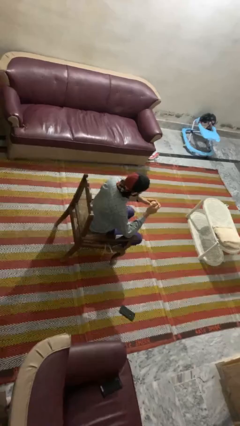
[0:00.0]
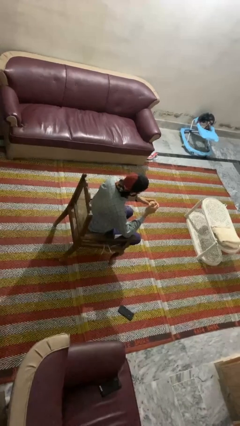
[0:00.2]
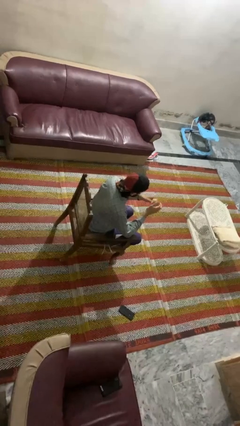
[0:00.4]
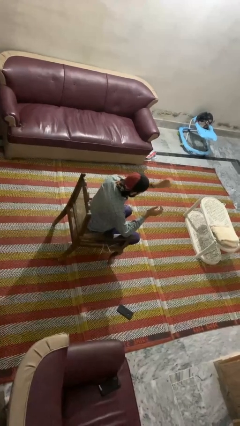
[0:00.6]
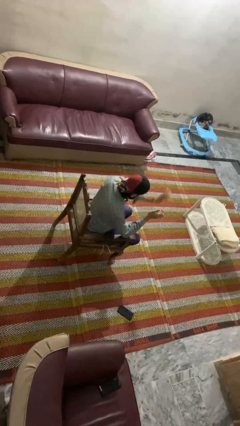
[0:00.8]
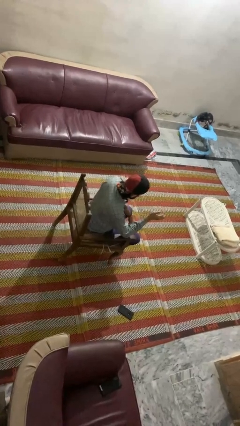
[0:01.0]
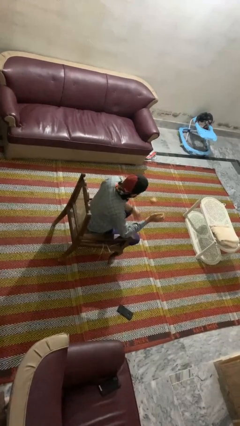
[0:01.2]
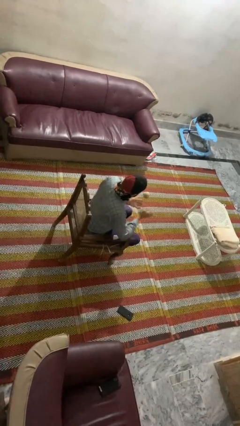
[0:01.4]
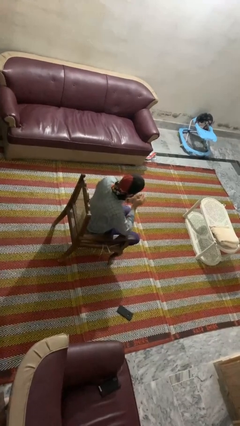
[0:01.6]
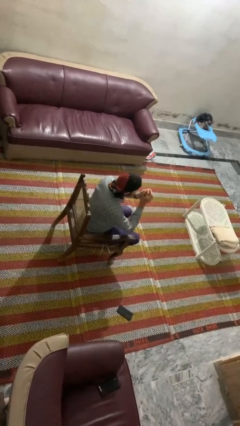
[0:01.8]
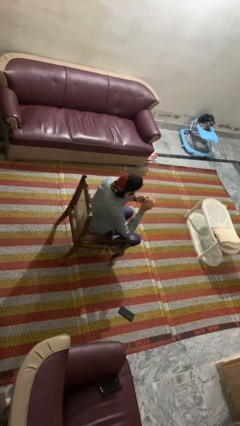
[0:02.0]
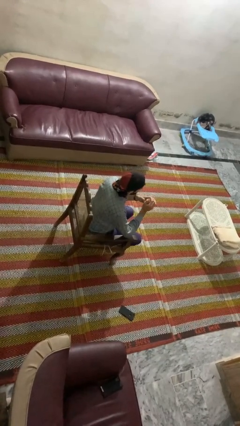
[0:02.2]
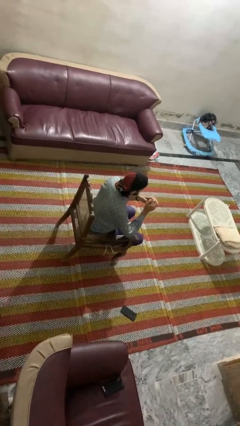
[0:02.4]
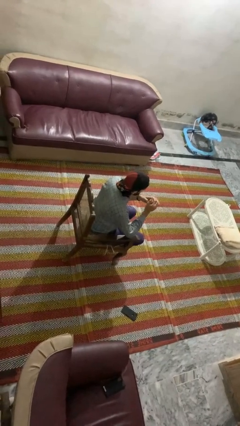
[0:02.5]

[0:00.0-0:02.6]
person bounces ball on floor

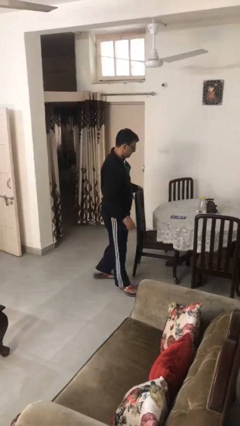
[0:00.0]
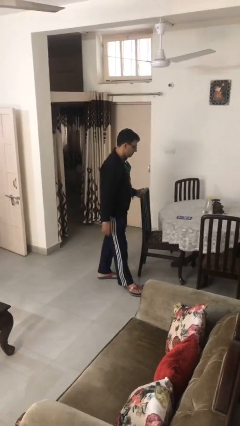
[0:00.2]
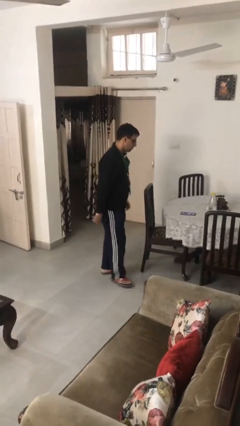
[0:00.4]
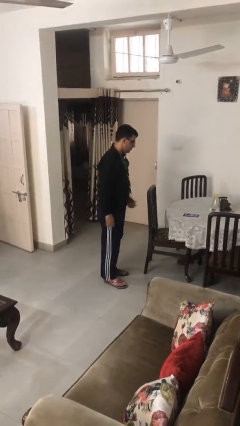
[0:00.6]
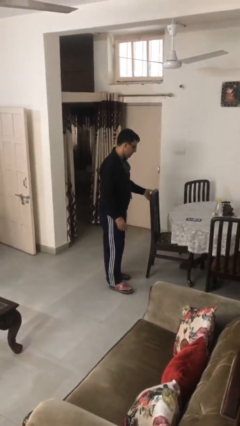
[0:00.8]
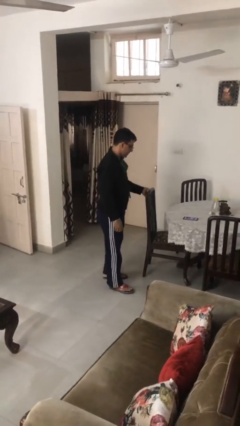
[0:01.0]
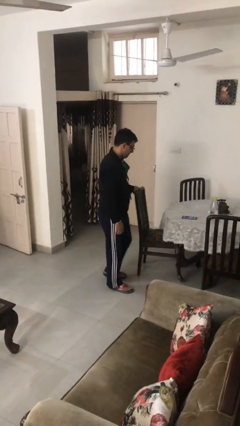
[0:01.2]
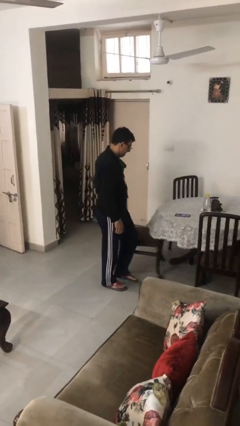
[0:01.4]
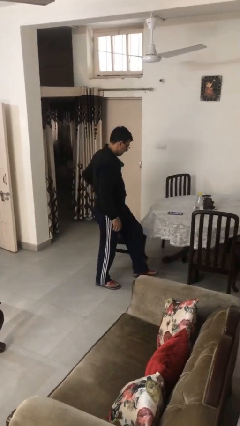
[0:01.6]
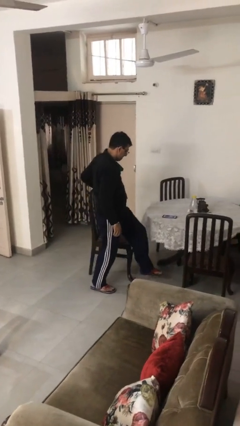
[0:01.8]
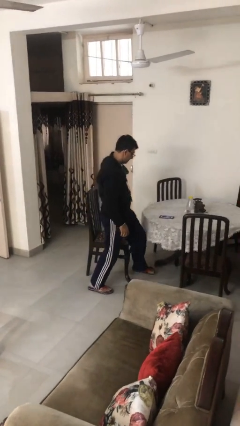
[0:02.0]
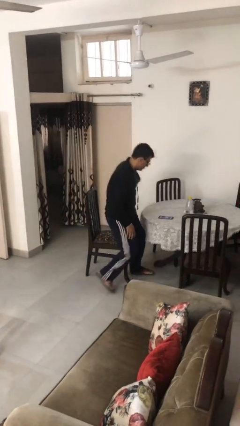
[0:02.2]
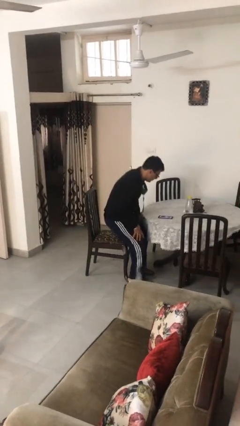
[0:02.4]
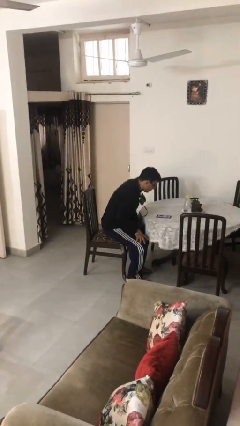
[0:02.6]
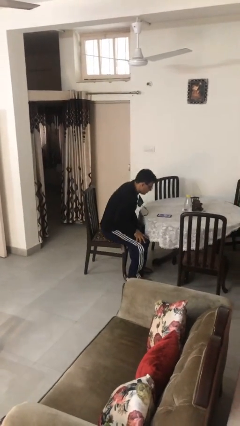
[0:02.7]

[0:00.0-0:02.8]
person sits down

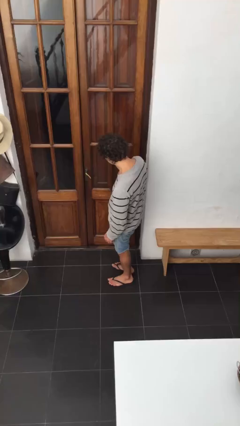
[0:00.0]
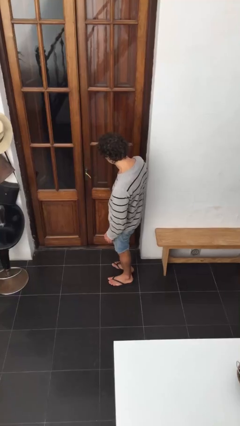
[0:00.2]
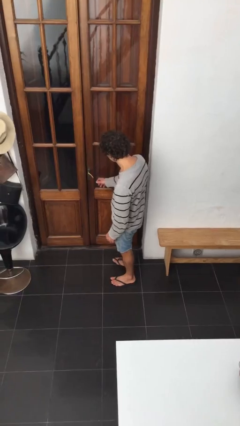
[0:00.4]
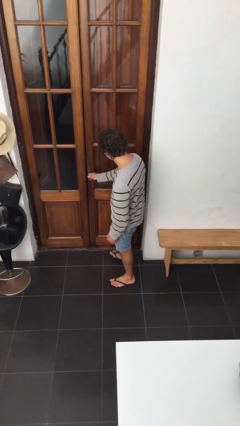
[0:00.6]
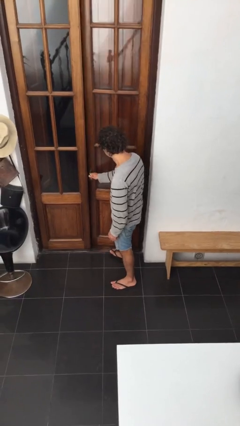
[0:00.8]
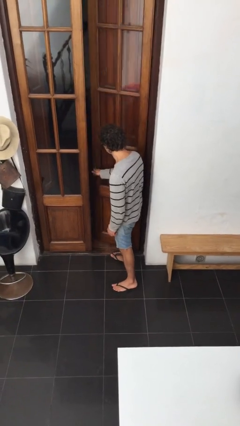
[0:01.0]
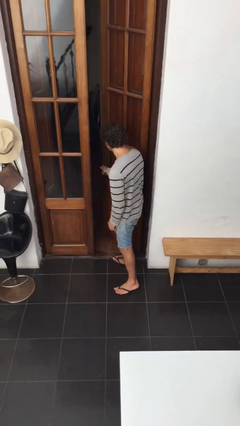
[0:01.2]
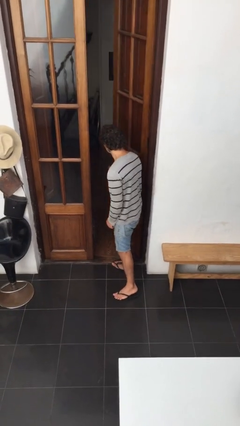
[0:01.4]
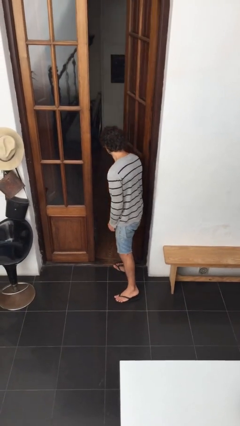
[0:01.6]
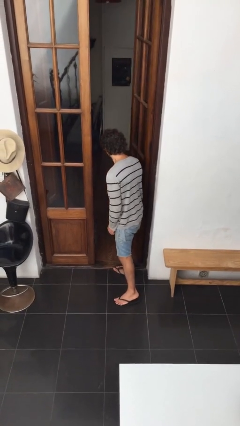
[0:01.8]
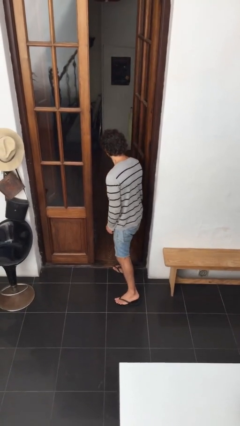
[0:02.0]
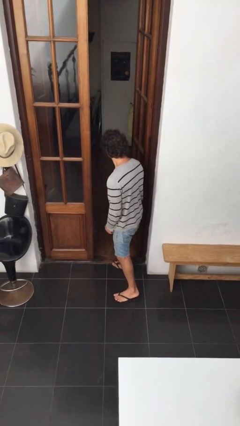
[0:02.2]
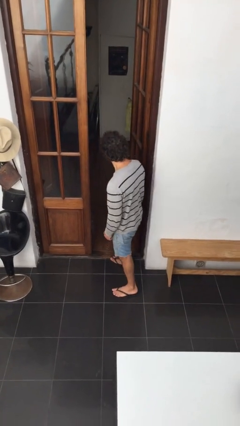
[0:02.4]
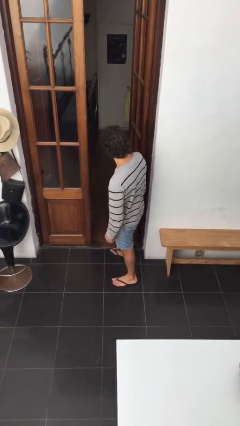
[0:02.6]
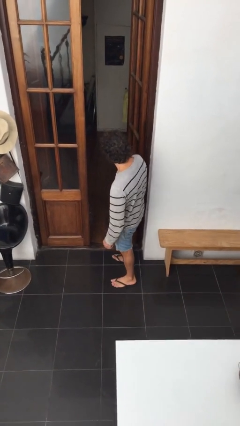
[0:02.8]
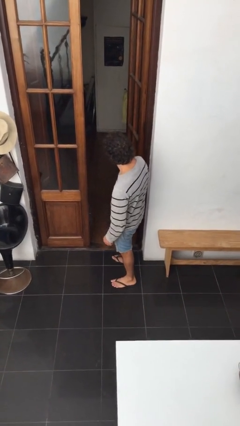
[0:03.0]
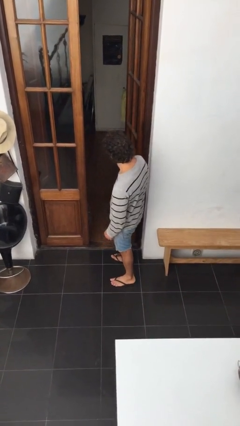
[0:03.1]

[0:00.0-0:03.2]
person opens facility door

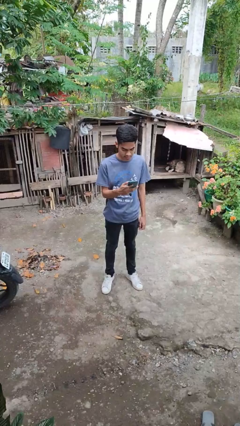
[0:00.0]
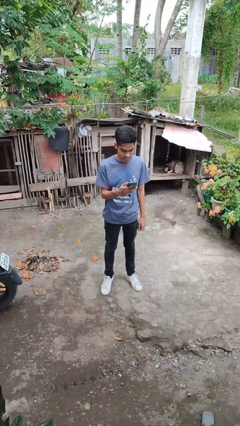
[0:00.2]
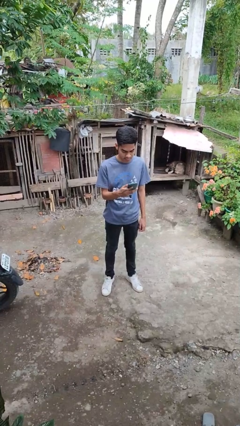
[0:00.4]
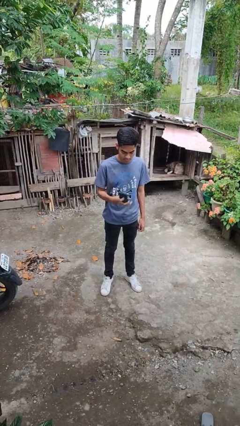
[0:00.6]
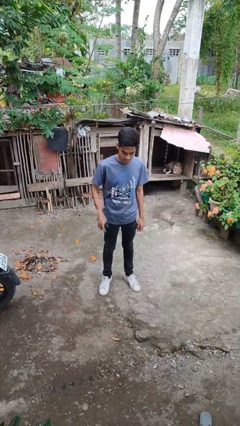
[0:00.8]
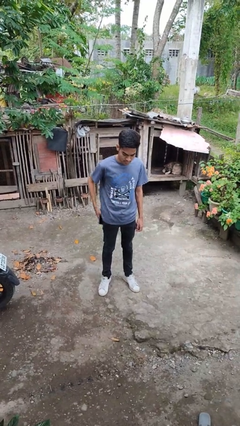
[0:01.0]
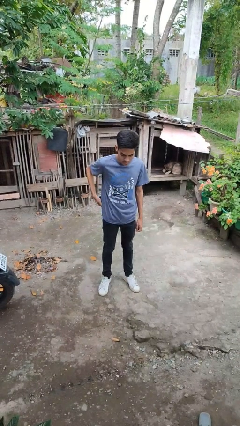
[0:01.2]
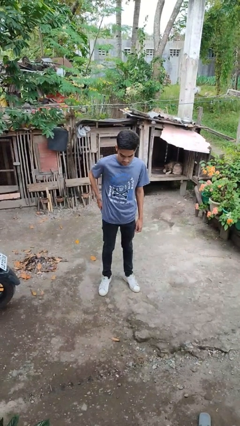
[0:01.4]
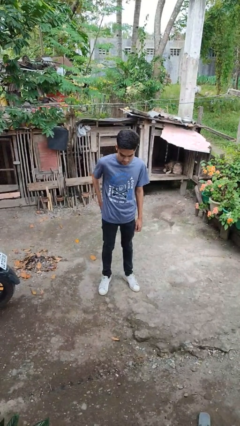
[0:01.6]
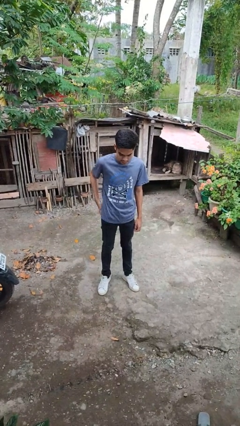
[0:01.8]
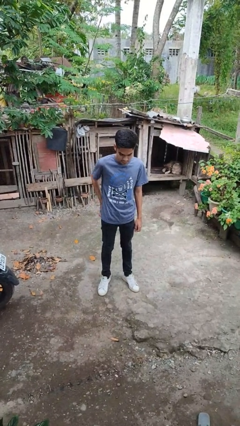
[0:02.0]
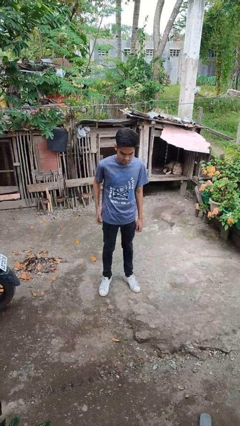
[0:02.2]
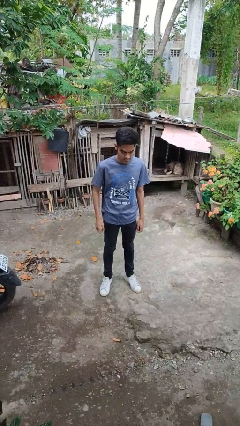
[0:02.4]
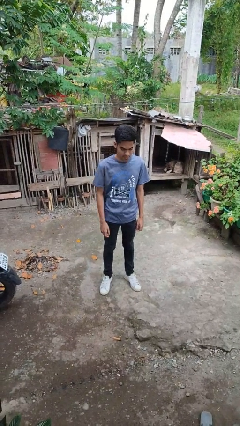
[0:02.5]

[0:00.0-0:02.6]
person puts phone into pocket

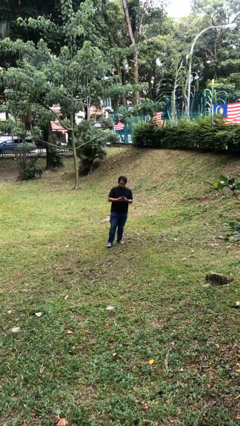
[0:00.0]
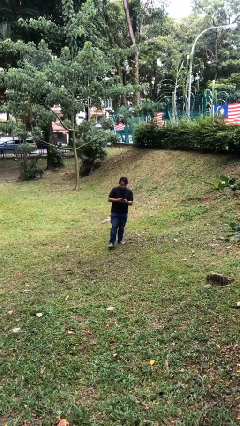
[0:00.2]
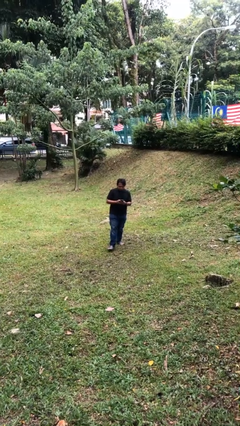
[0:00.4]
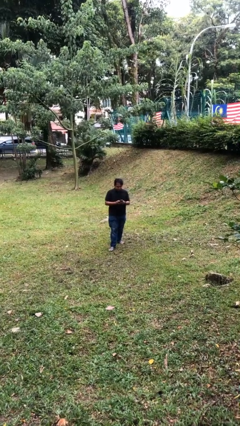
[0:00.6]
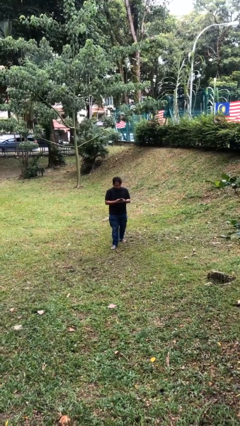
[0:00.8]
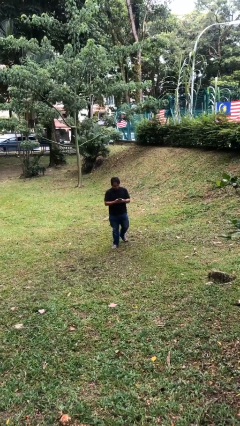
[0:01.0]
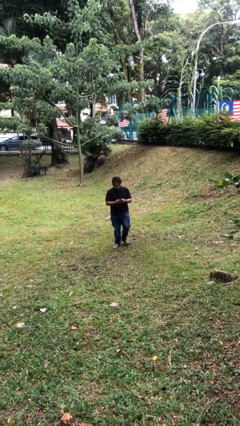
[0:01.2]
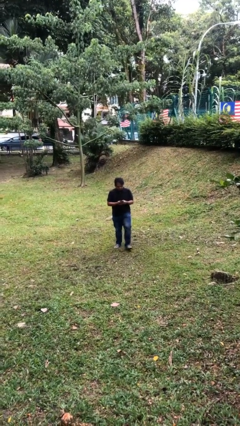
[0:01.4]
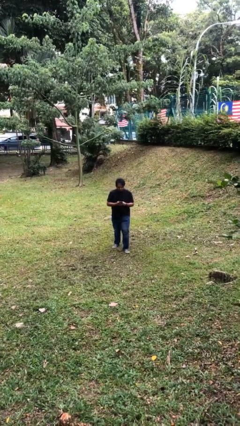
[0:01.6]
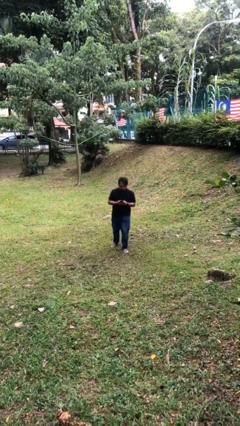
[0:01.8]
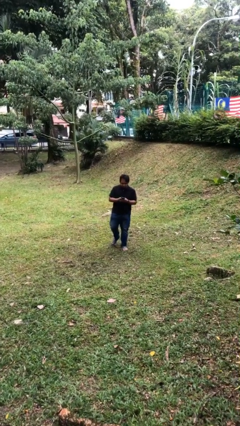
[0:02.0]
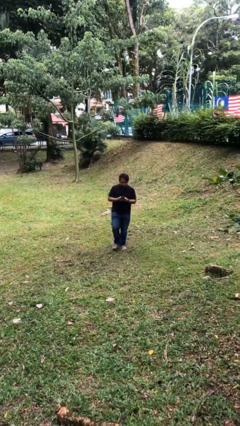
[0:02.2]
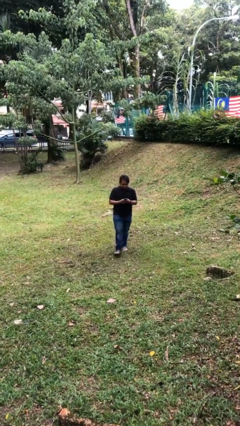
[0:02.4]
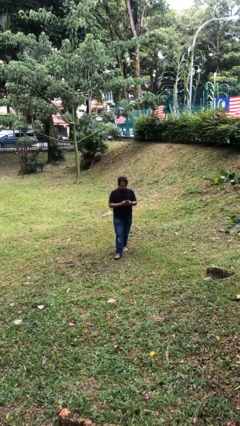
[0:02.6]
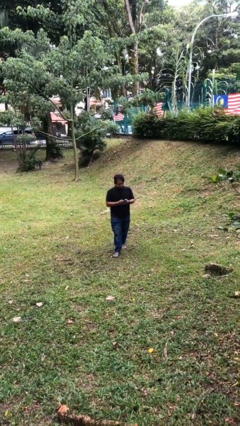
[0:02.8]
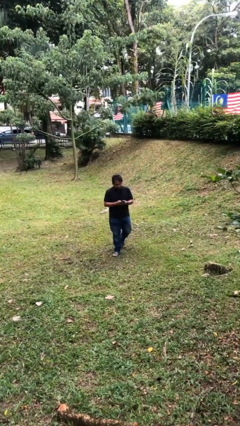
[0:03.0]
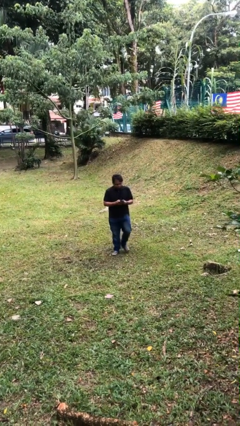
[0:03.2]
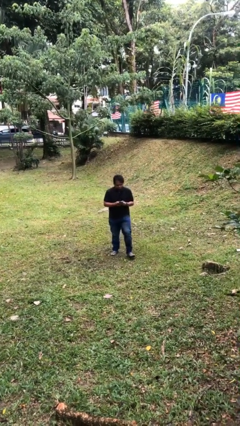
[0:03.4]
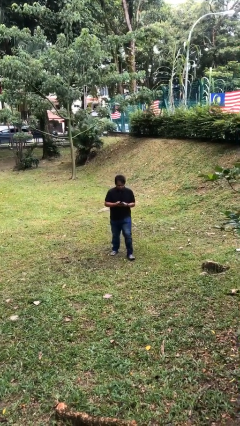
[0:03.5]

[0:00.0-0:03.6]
person texts on phone

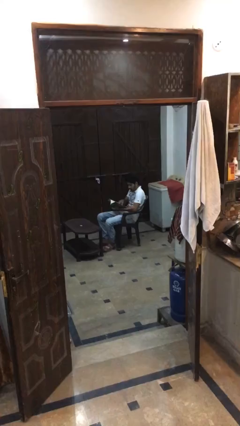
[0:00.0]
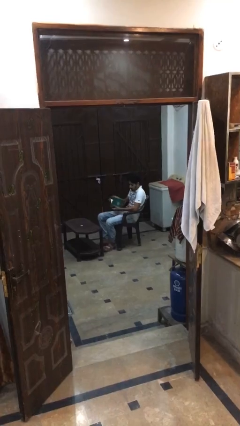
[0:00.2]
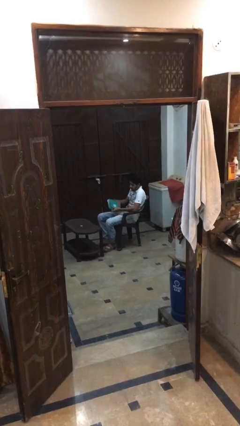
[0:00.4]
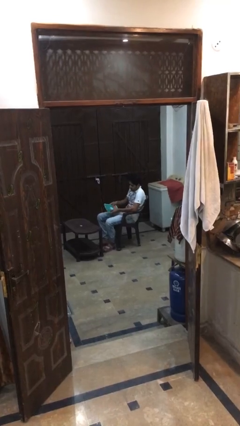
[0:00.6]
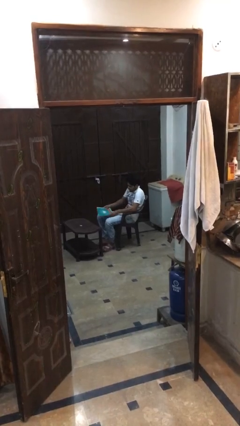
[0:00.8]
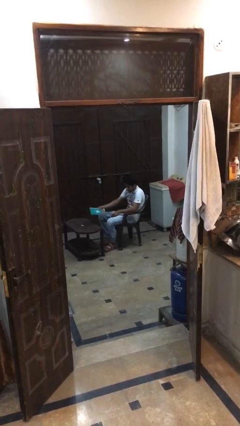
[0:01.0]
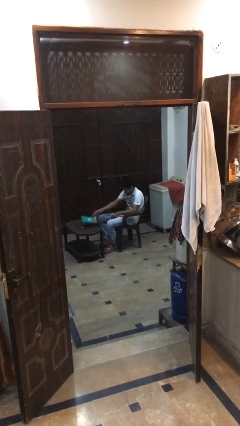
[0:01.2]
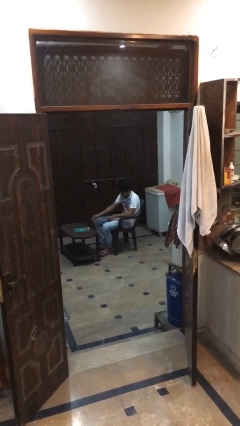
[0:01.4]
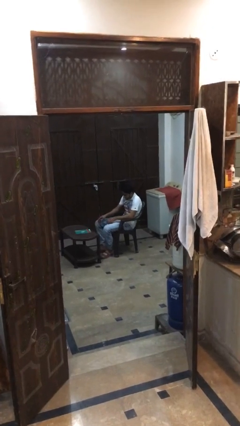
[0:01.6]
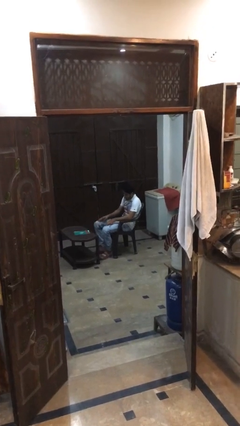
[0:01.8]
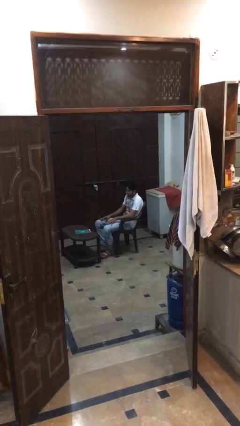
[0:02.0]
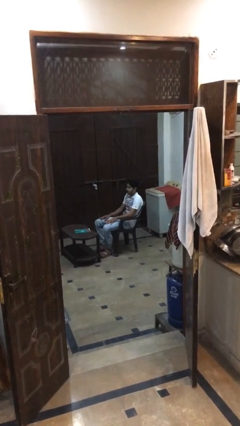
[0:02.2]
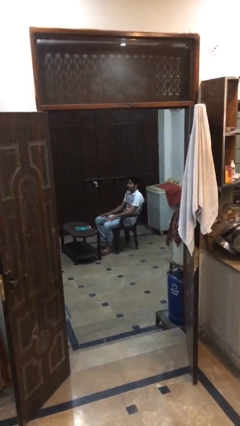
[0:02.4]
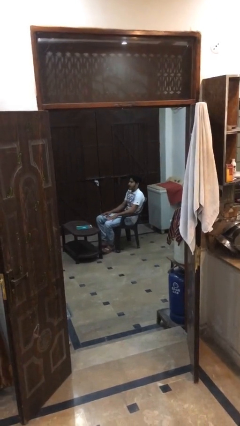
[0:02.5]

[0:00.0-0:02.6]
person puts down object on table
